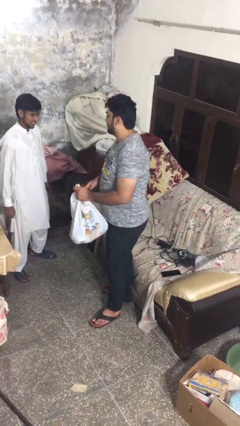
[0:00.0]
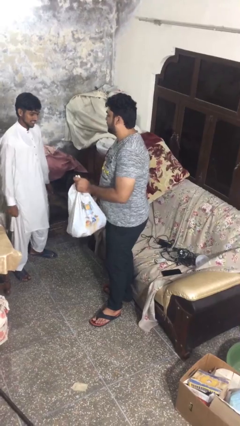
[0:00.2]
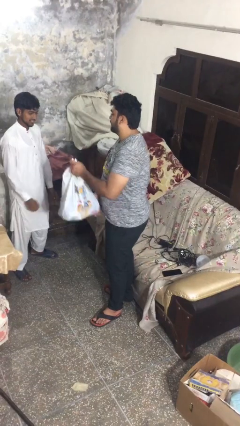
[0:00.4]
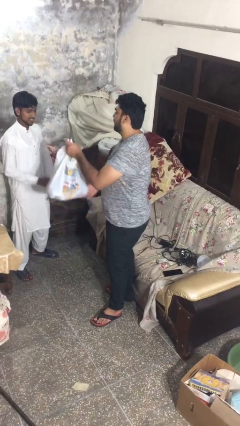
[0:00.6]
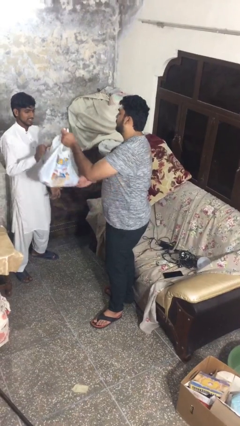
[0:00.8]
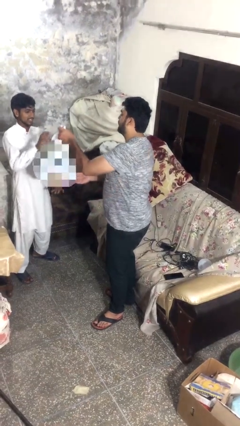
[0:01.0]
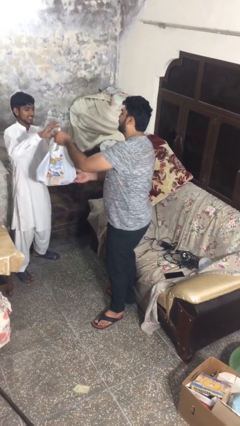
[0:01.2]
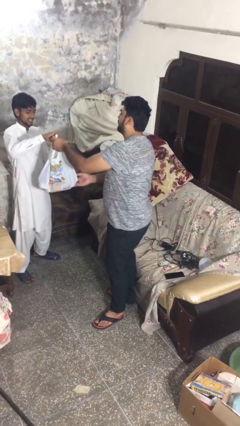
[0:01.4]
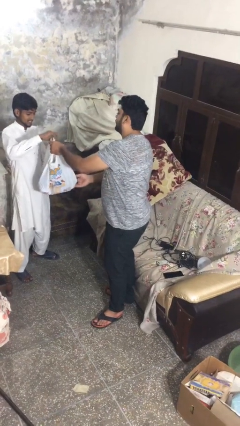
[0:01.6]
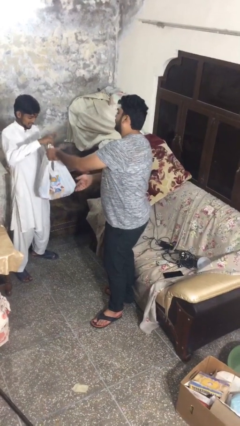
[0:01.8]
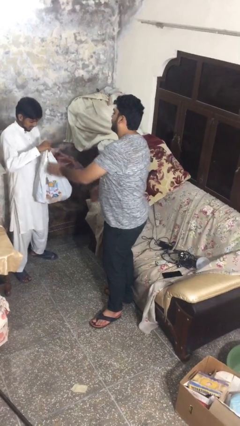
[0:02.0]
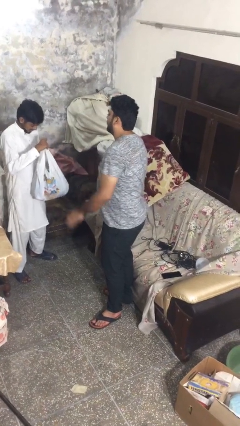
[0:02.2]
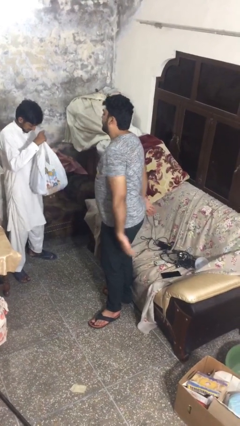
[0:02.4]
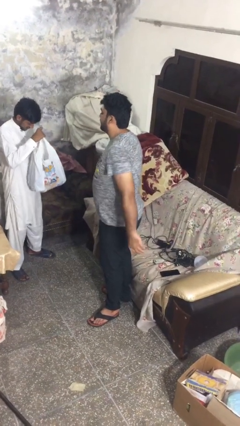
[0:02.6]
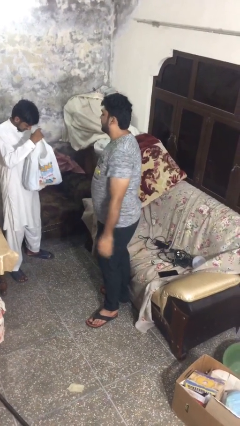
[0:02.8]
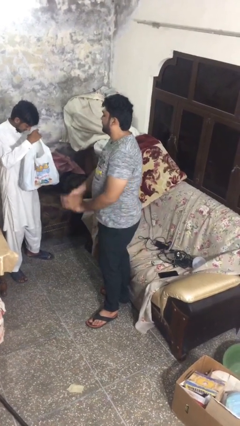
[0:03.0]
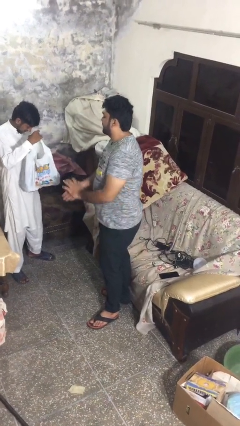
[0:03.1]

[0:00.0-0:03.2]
person transfers object to person

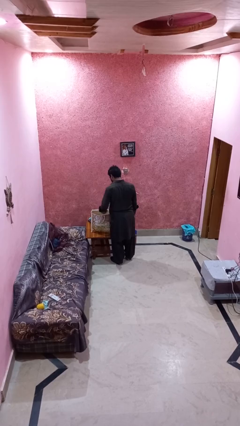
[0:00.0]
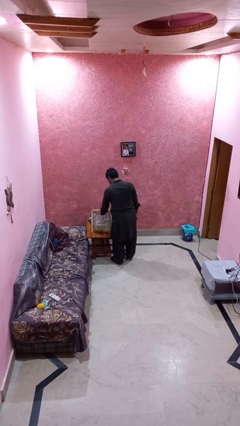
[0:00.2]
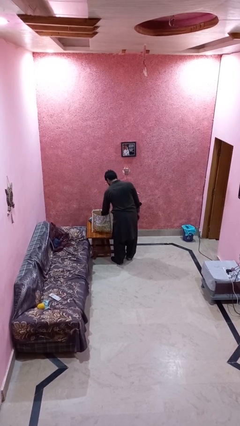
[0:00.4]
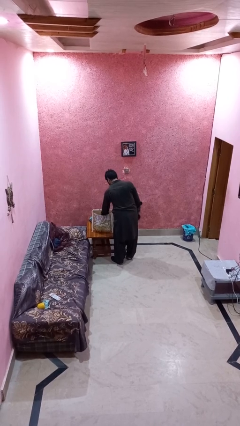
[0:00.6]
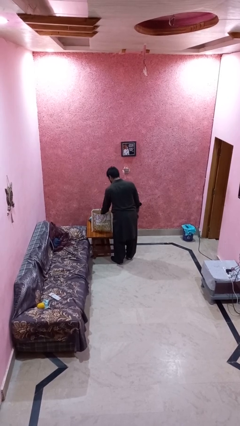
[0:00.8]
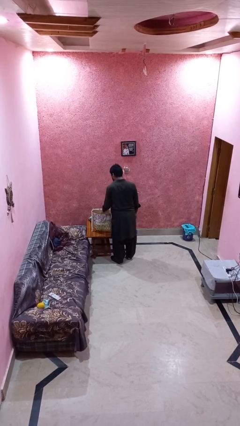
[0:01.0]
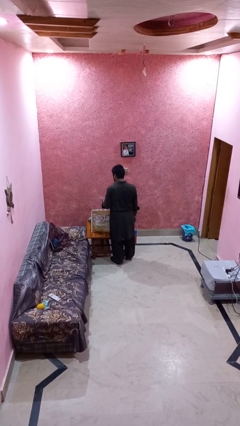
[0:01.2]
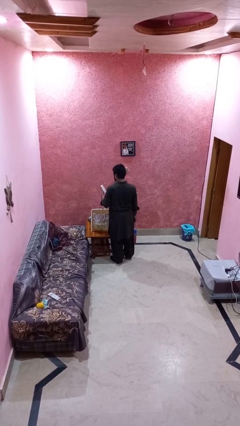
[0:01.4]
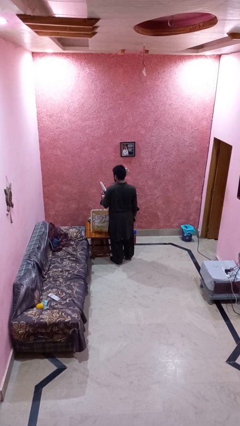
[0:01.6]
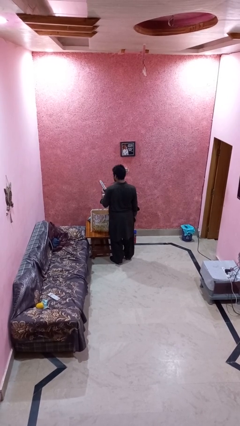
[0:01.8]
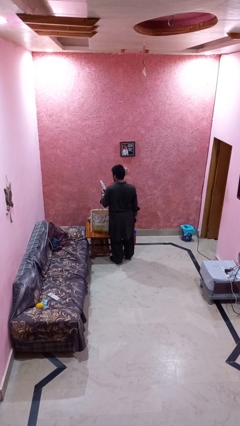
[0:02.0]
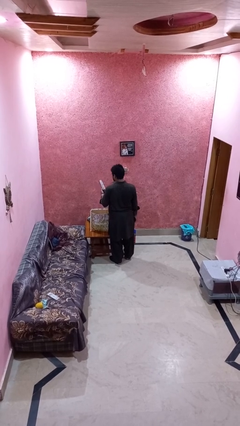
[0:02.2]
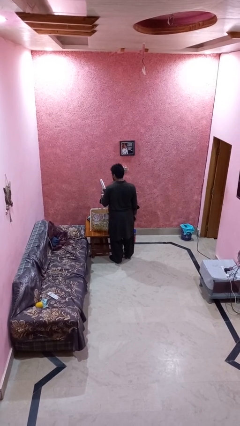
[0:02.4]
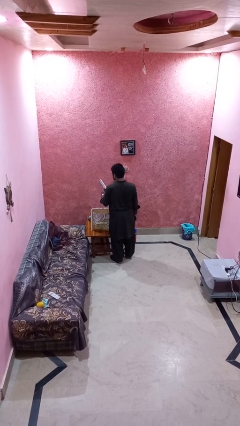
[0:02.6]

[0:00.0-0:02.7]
person takes object from bag

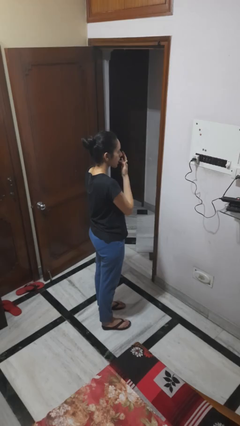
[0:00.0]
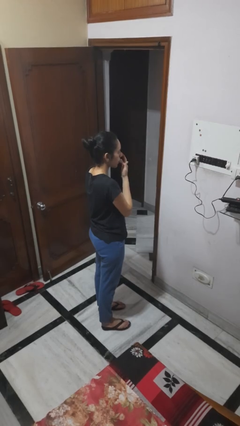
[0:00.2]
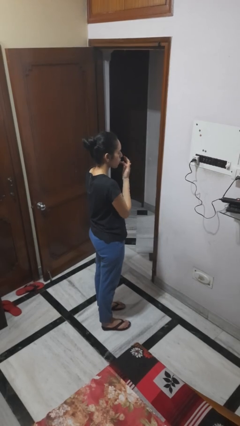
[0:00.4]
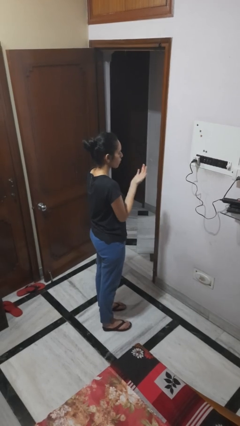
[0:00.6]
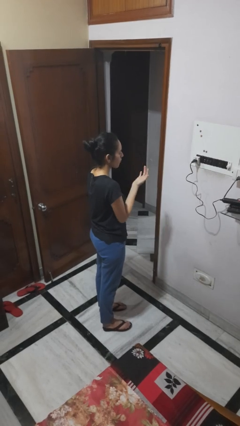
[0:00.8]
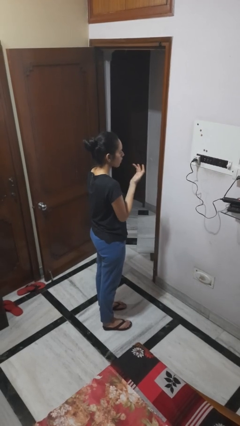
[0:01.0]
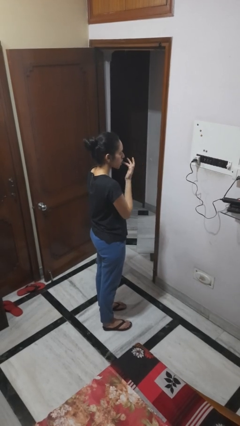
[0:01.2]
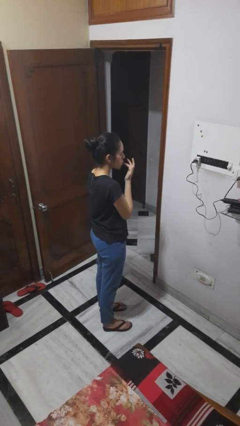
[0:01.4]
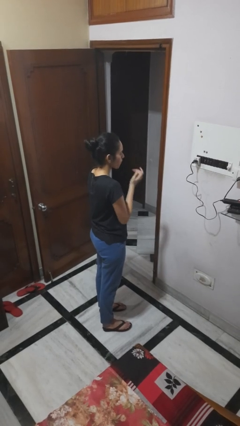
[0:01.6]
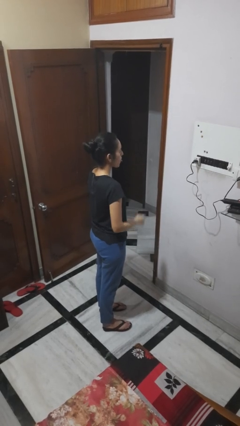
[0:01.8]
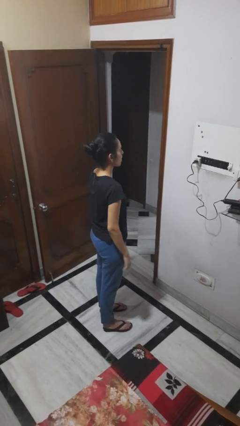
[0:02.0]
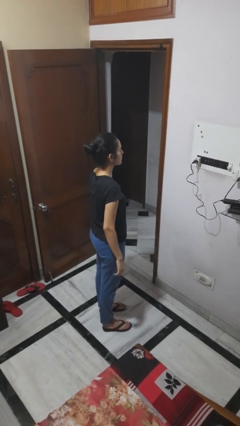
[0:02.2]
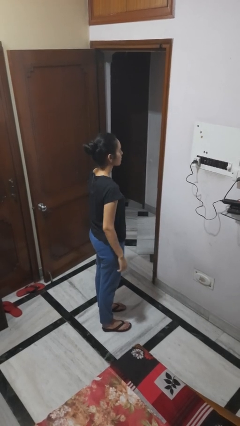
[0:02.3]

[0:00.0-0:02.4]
person licks fingers

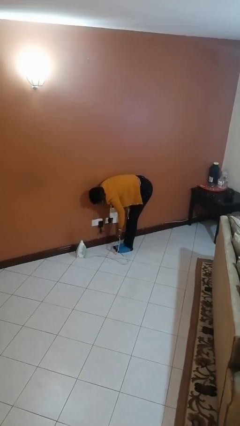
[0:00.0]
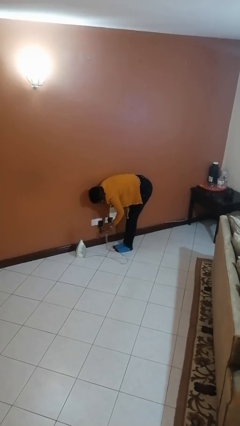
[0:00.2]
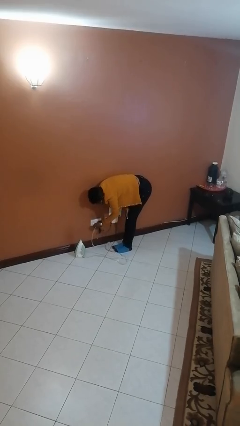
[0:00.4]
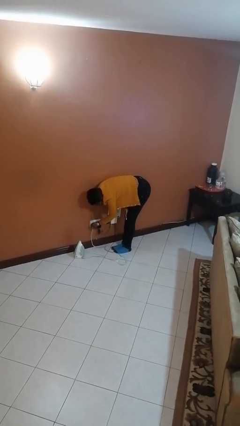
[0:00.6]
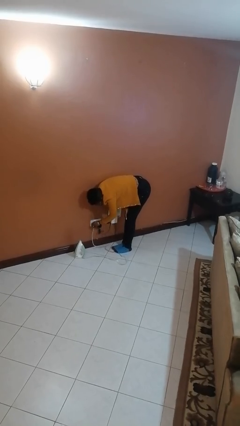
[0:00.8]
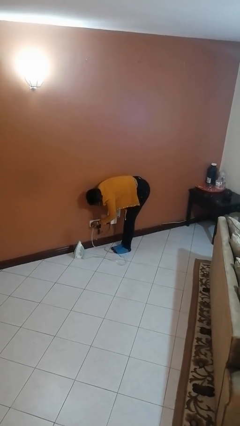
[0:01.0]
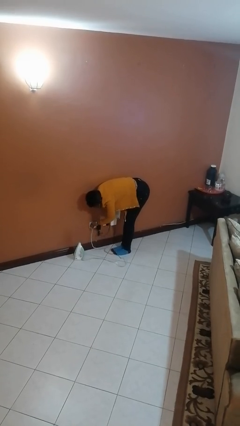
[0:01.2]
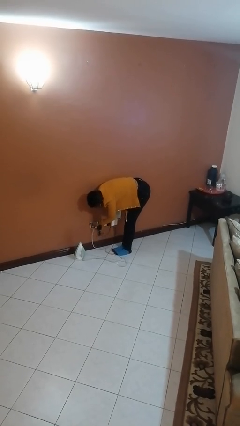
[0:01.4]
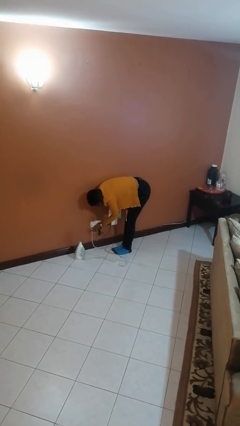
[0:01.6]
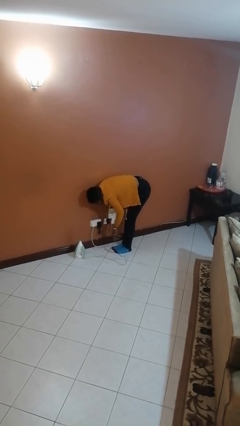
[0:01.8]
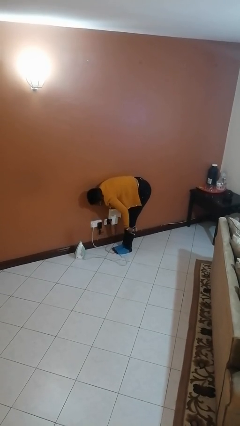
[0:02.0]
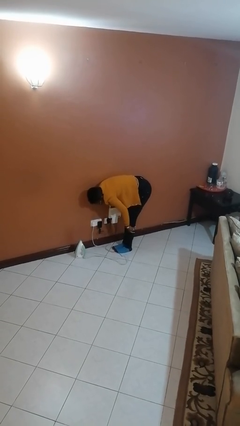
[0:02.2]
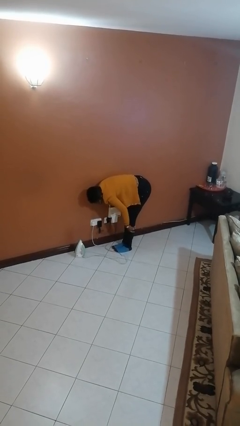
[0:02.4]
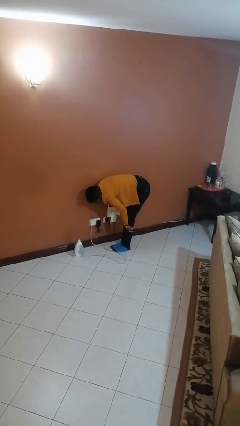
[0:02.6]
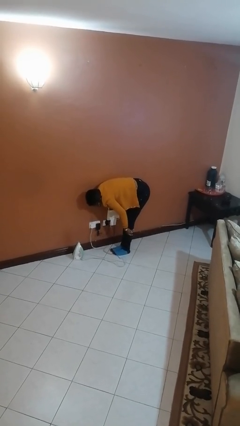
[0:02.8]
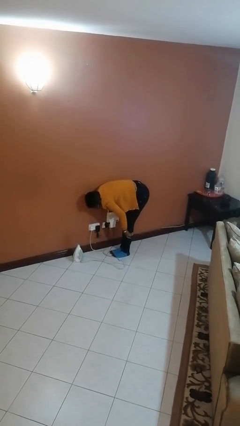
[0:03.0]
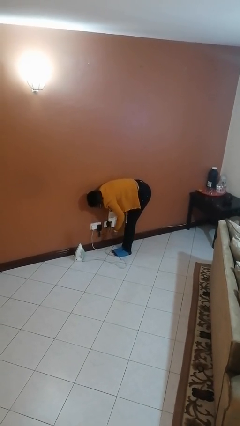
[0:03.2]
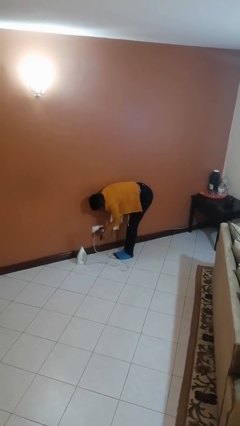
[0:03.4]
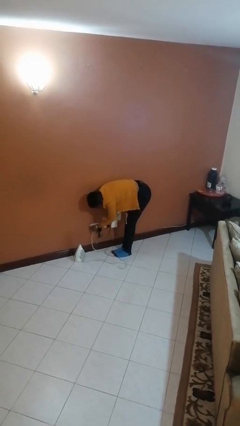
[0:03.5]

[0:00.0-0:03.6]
person plugs into electrical socket

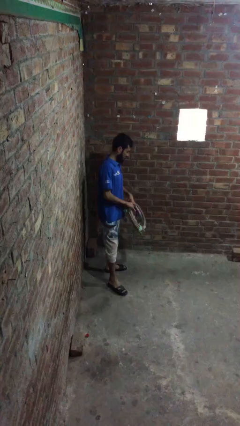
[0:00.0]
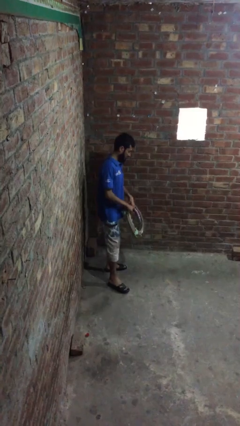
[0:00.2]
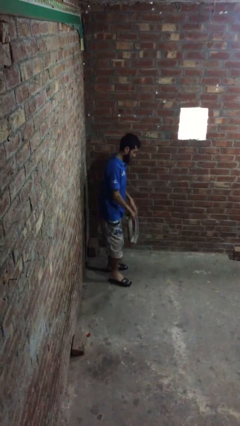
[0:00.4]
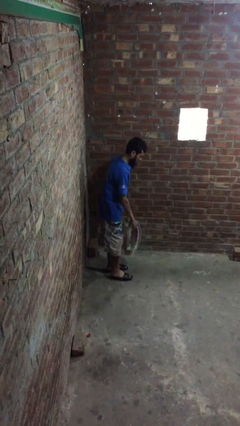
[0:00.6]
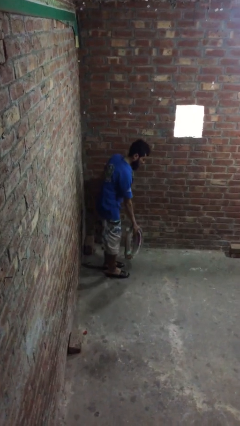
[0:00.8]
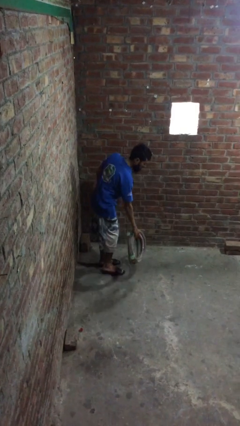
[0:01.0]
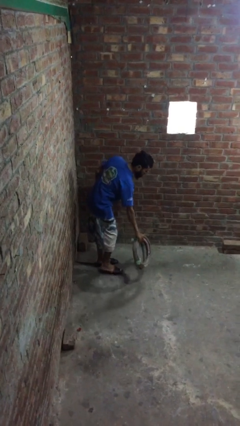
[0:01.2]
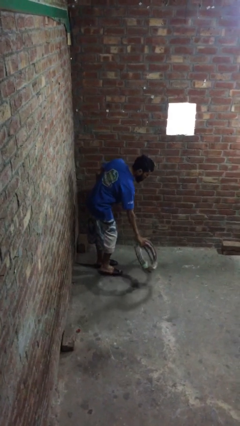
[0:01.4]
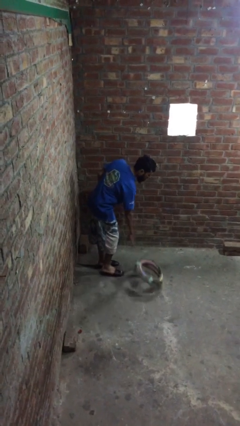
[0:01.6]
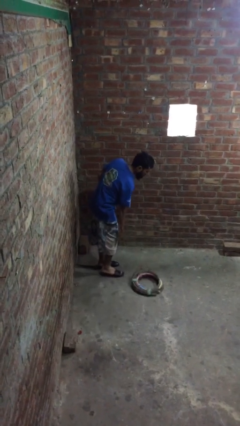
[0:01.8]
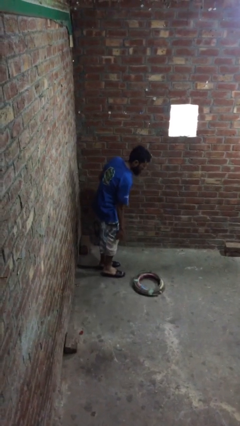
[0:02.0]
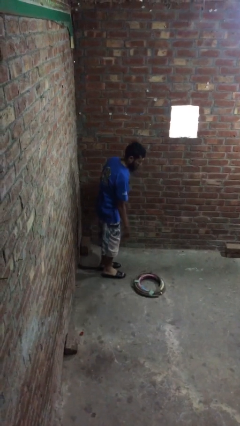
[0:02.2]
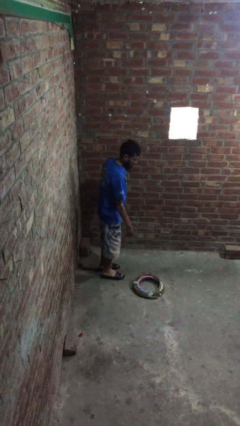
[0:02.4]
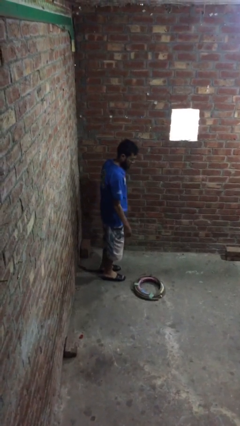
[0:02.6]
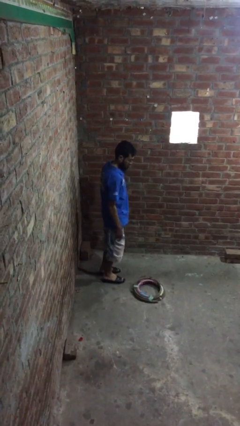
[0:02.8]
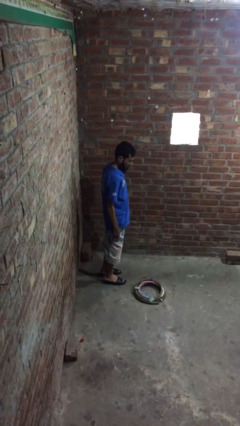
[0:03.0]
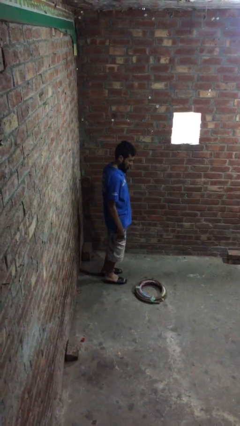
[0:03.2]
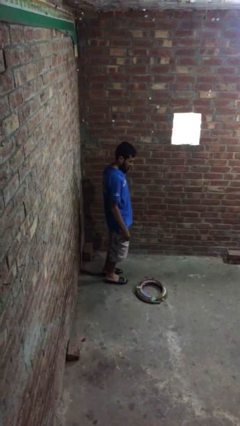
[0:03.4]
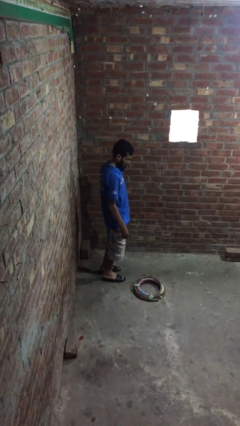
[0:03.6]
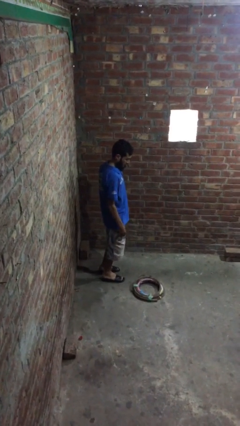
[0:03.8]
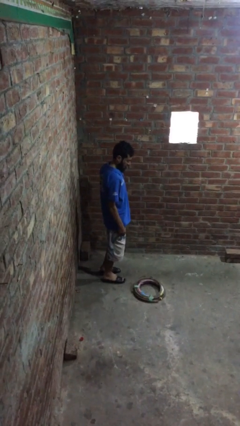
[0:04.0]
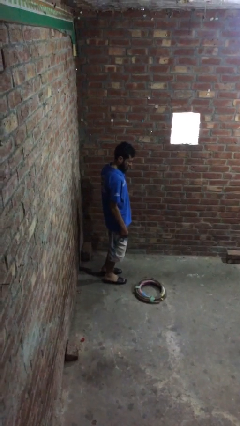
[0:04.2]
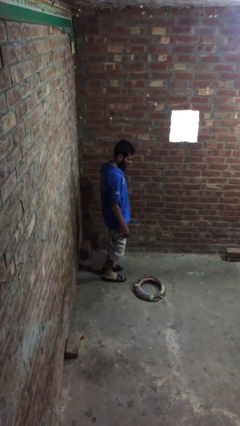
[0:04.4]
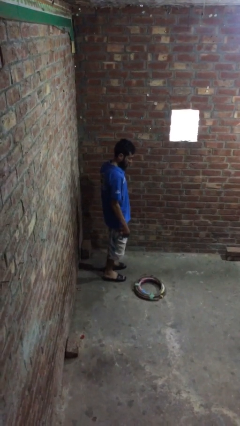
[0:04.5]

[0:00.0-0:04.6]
person puts down object on floor

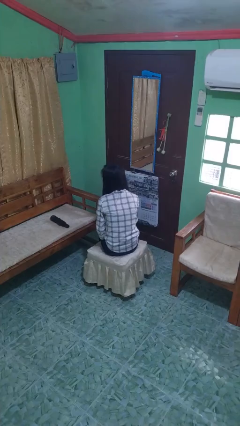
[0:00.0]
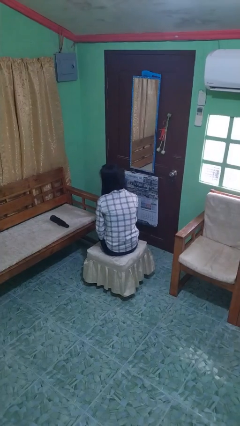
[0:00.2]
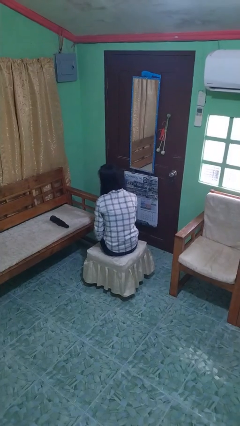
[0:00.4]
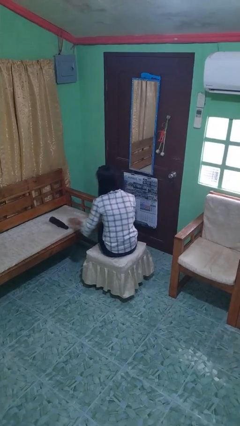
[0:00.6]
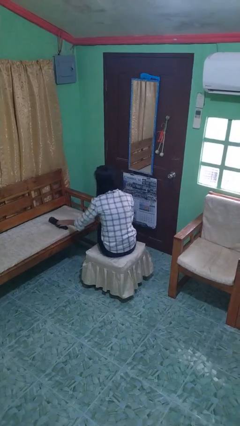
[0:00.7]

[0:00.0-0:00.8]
person picks up object from couch
